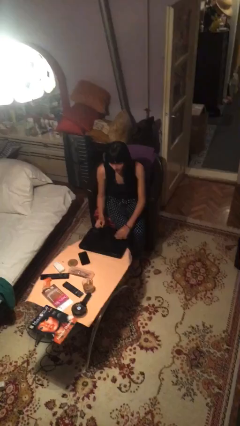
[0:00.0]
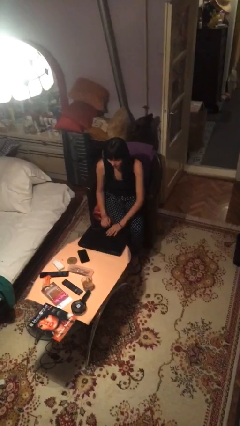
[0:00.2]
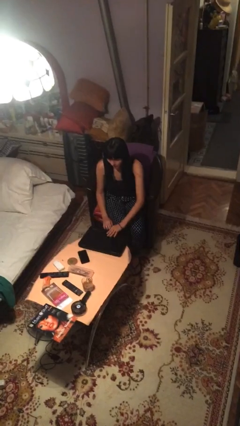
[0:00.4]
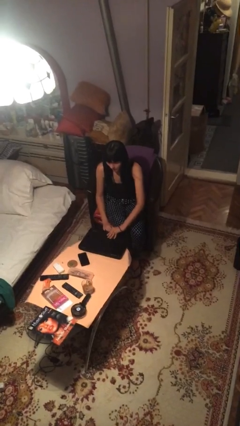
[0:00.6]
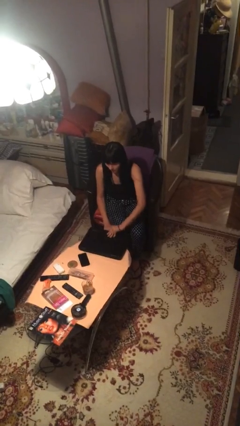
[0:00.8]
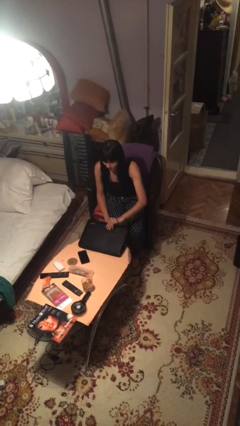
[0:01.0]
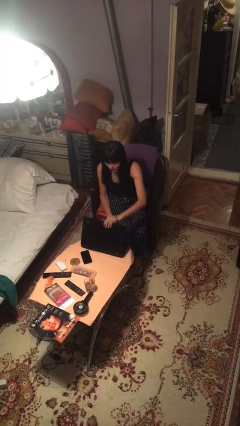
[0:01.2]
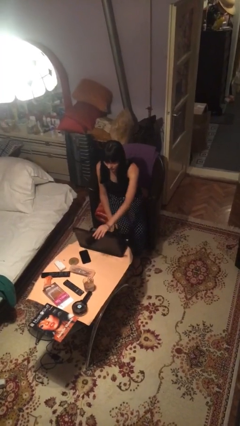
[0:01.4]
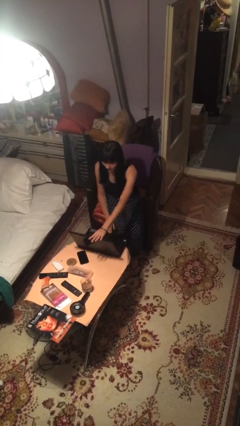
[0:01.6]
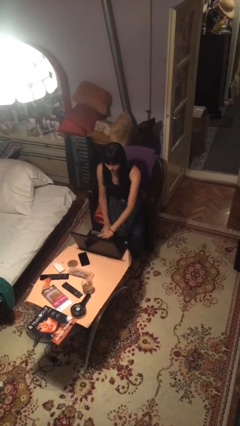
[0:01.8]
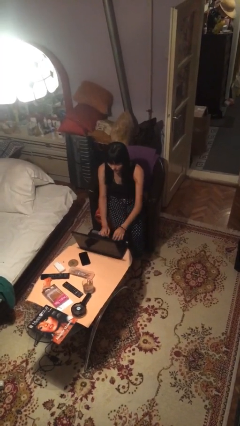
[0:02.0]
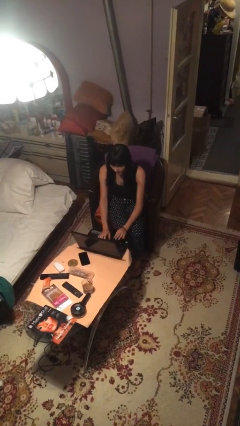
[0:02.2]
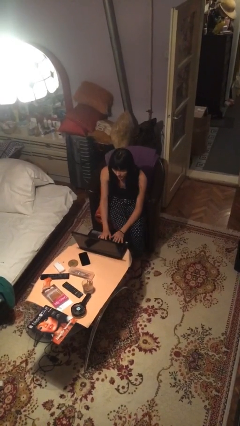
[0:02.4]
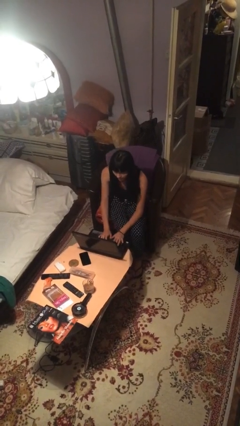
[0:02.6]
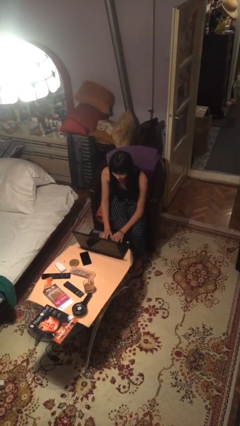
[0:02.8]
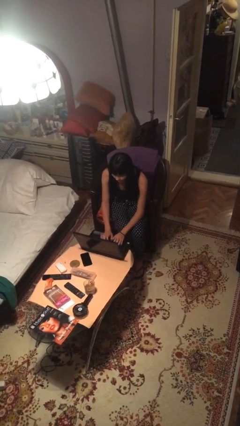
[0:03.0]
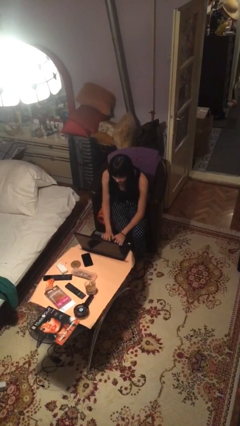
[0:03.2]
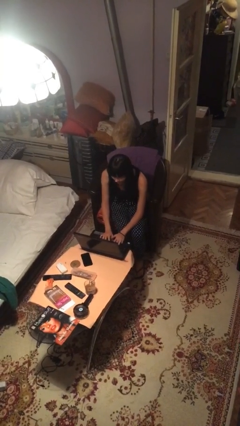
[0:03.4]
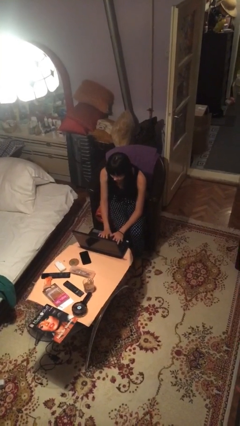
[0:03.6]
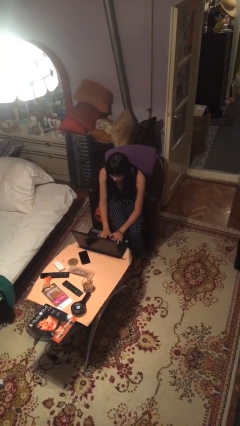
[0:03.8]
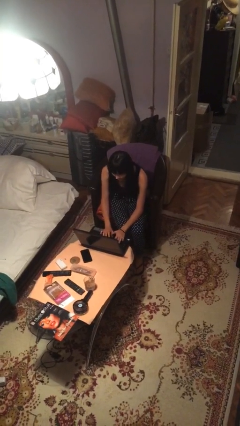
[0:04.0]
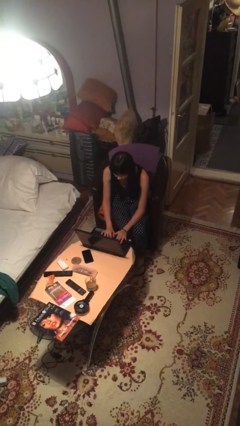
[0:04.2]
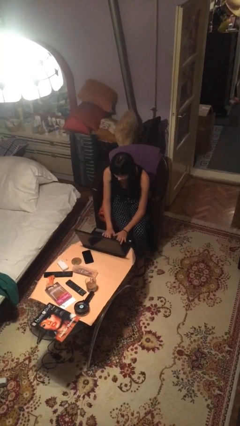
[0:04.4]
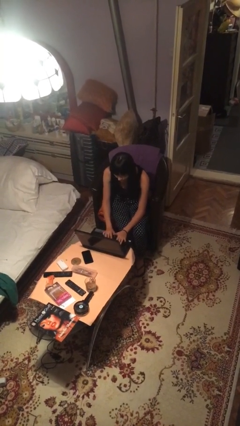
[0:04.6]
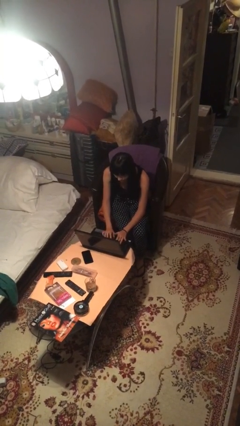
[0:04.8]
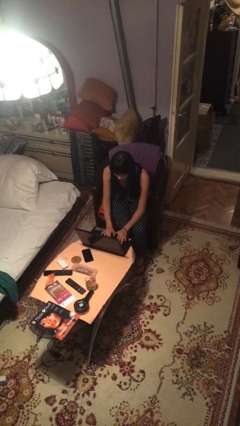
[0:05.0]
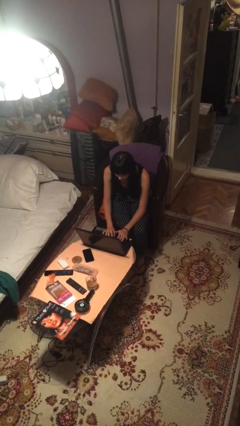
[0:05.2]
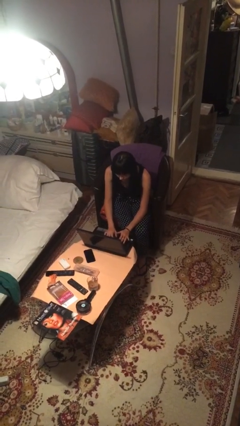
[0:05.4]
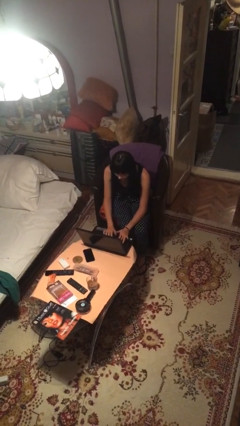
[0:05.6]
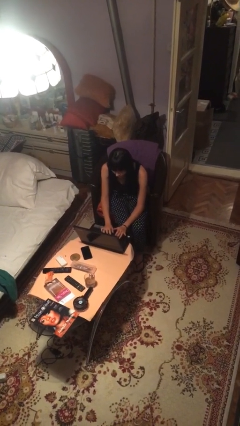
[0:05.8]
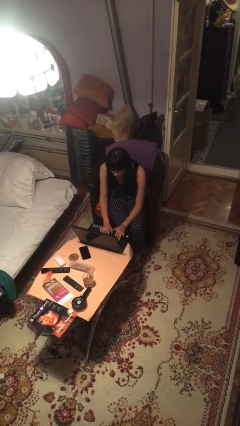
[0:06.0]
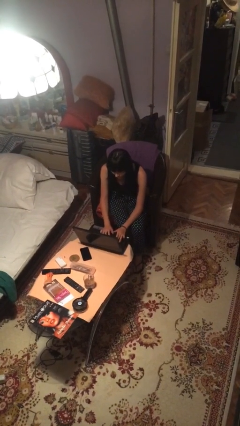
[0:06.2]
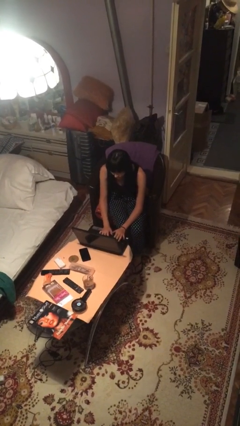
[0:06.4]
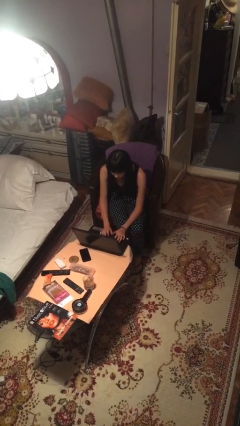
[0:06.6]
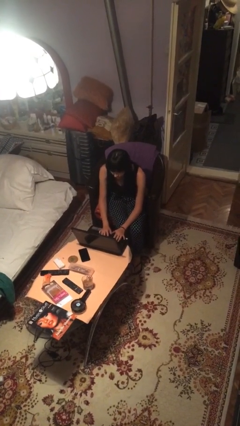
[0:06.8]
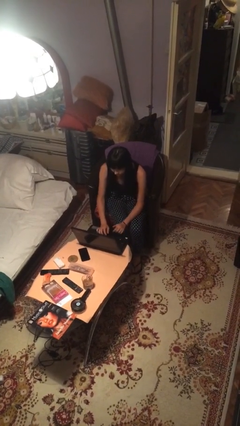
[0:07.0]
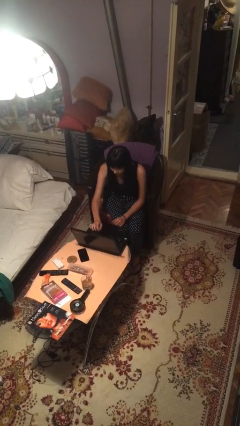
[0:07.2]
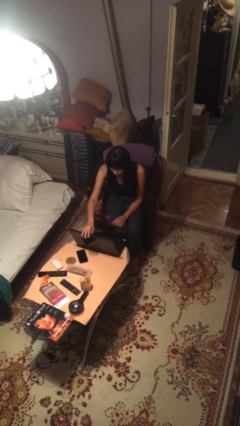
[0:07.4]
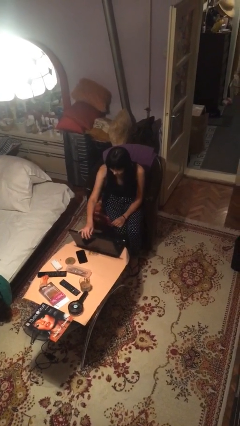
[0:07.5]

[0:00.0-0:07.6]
person interacts with laptop

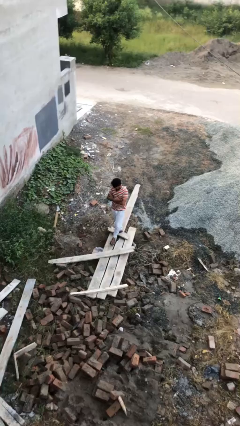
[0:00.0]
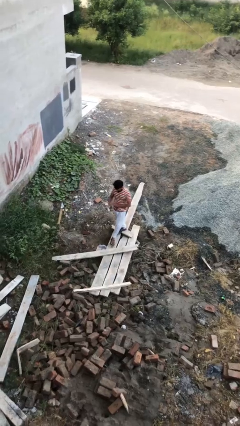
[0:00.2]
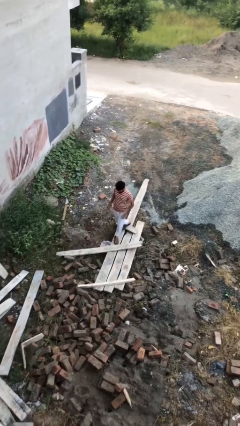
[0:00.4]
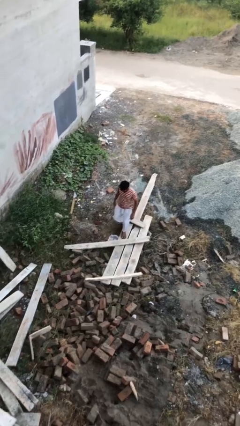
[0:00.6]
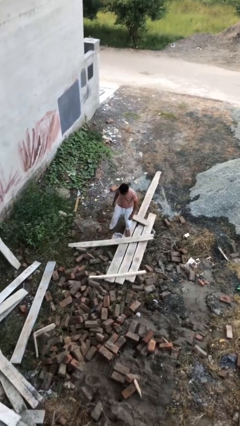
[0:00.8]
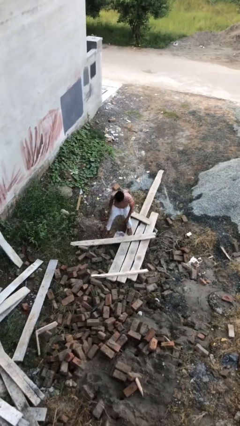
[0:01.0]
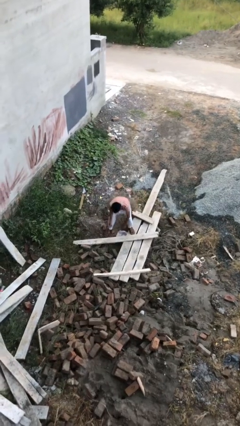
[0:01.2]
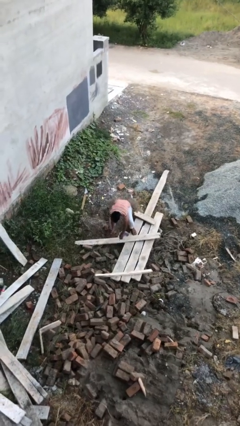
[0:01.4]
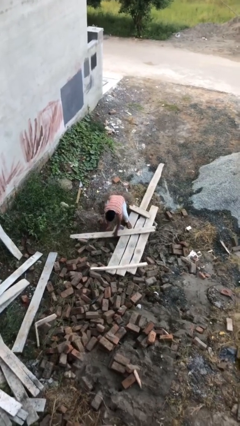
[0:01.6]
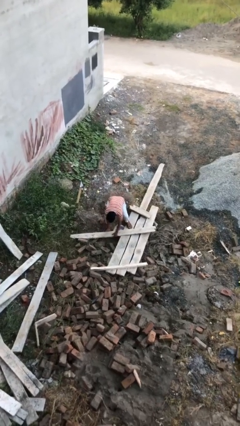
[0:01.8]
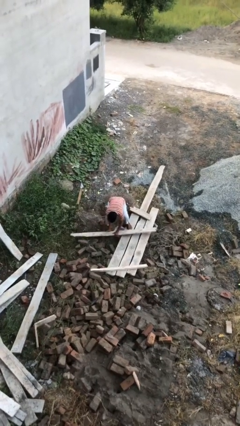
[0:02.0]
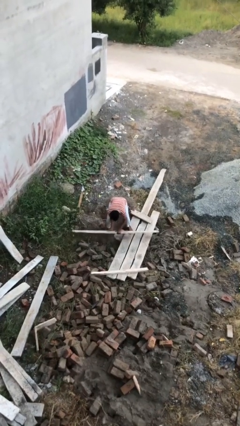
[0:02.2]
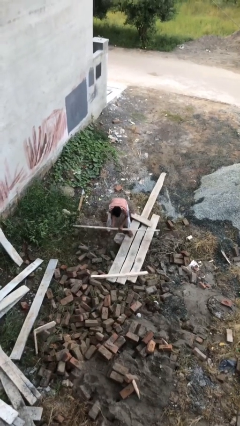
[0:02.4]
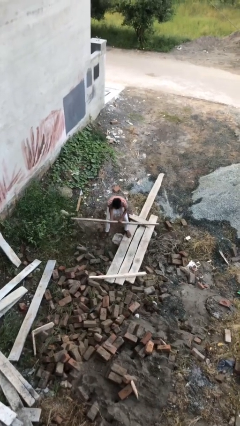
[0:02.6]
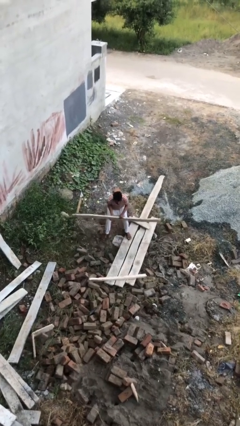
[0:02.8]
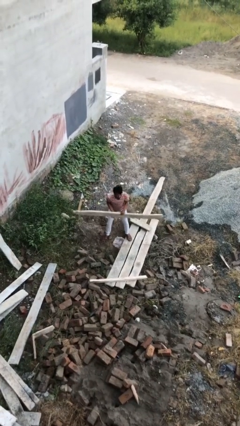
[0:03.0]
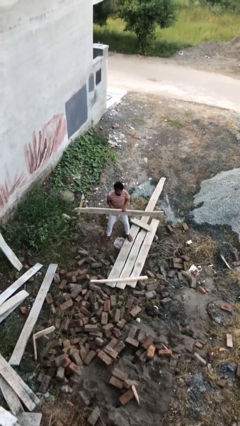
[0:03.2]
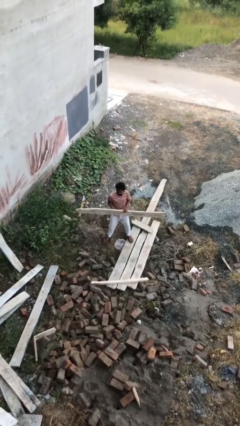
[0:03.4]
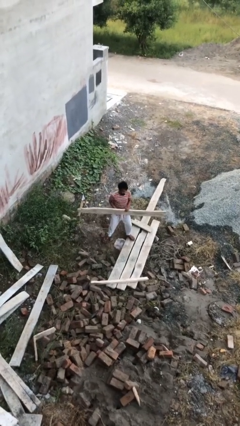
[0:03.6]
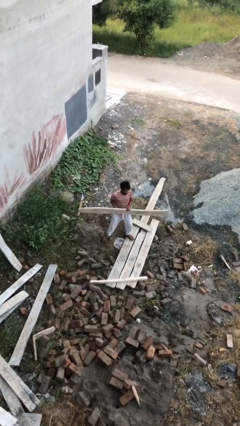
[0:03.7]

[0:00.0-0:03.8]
person picks up object from floor

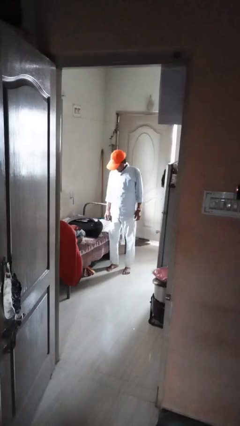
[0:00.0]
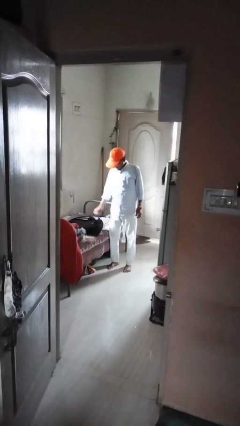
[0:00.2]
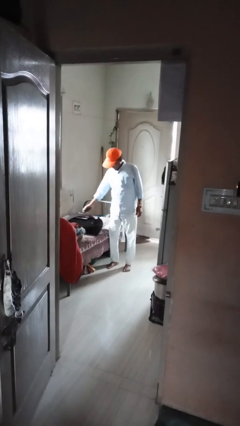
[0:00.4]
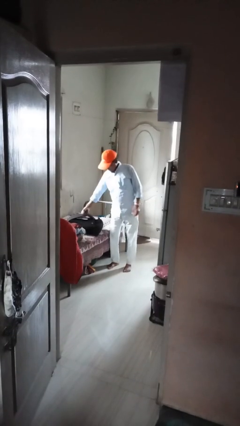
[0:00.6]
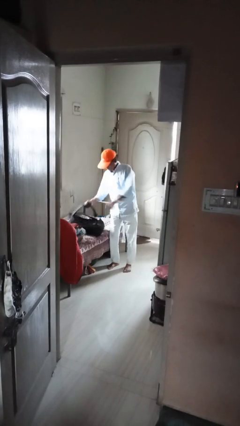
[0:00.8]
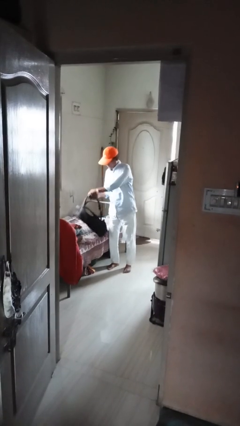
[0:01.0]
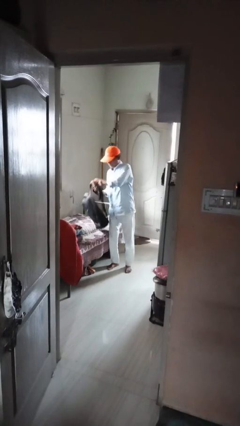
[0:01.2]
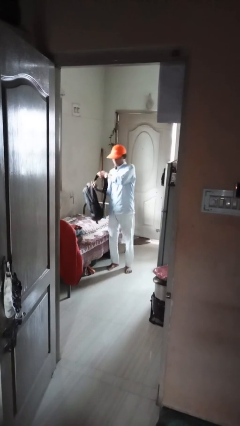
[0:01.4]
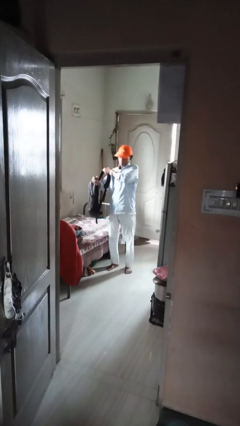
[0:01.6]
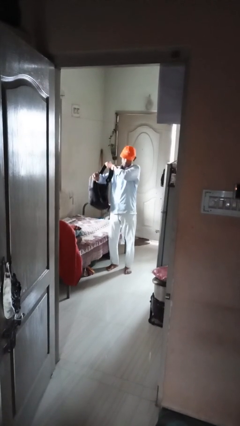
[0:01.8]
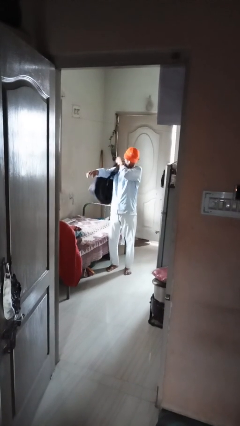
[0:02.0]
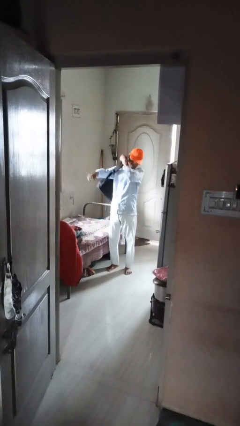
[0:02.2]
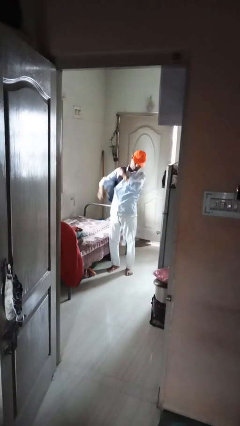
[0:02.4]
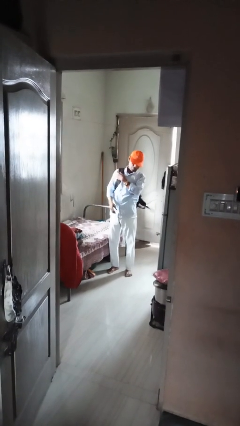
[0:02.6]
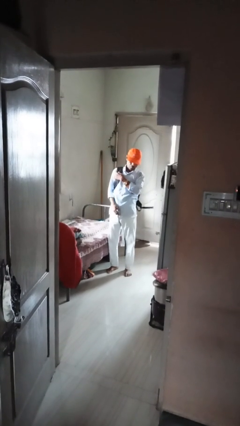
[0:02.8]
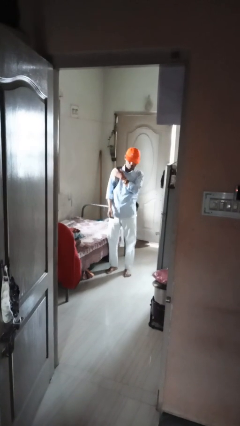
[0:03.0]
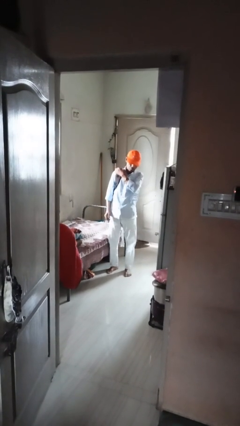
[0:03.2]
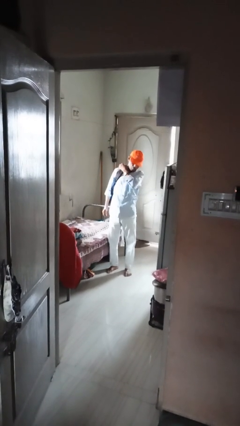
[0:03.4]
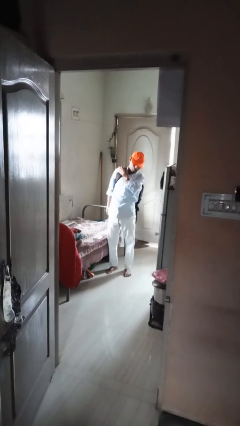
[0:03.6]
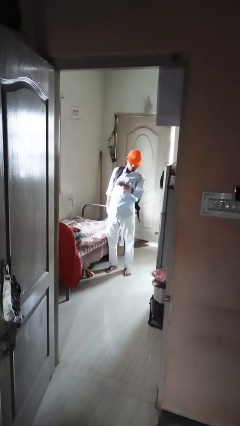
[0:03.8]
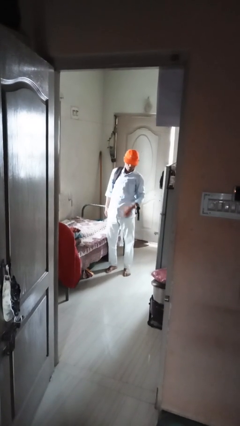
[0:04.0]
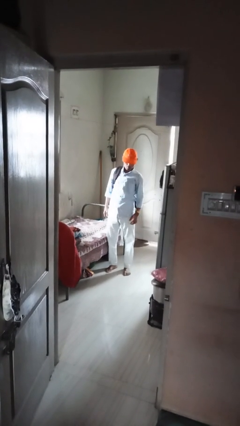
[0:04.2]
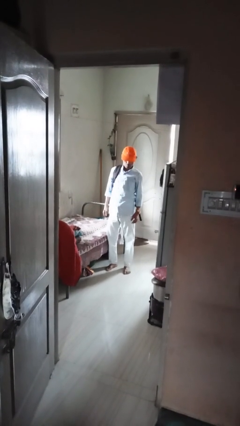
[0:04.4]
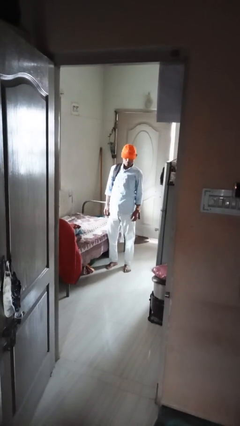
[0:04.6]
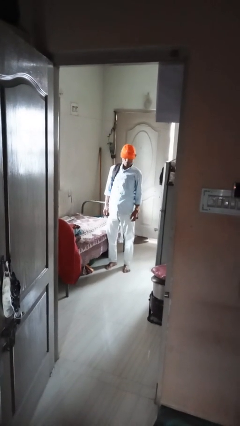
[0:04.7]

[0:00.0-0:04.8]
person puts on backpack

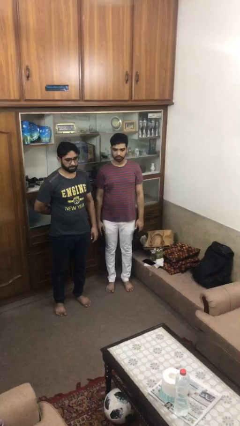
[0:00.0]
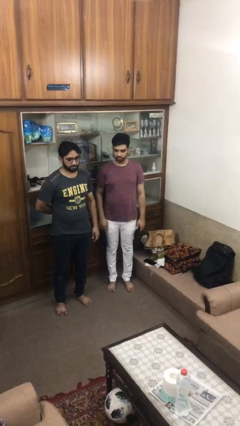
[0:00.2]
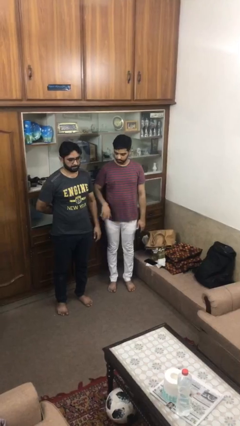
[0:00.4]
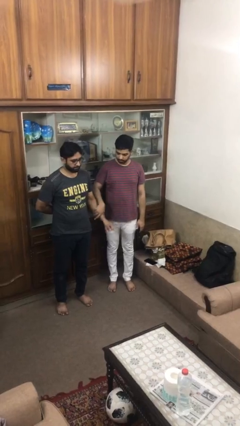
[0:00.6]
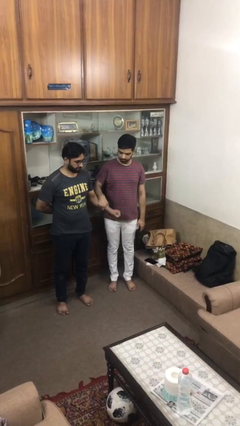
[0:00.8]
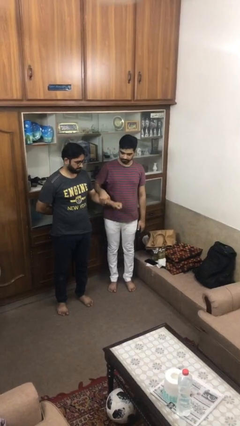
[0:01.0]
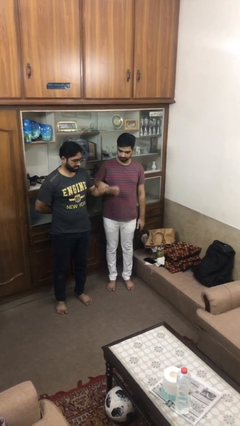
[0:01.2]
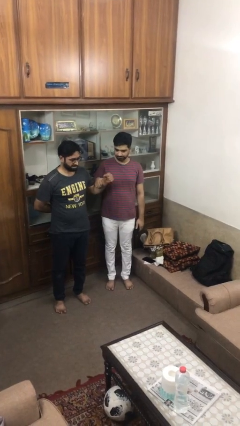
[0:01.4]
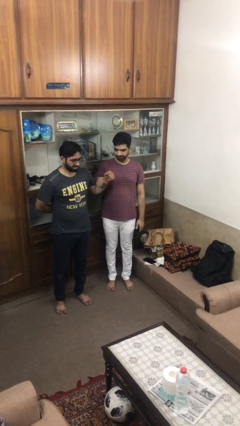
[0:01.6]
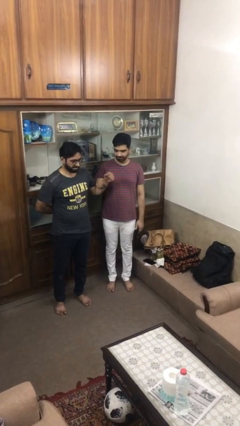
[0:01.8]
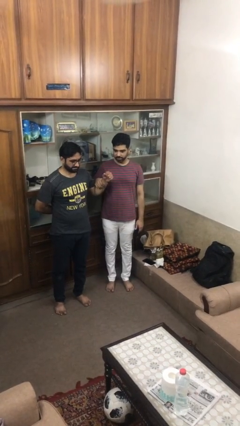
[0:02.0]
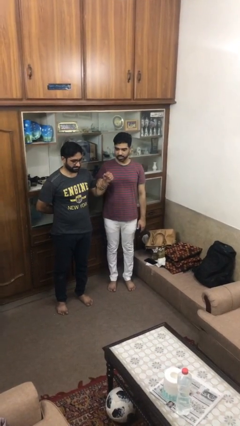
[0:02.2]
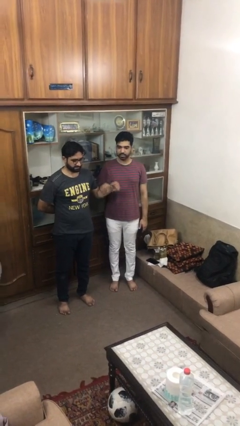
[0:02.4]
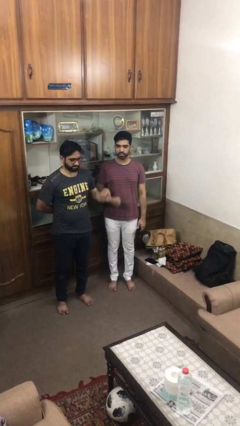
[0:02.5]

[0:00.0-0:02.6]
person grabs person by forearm
